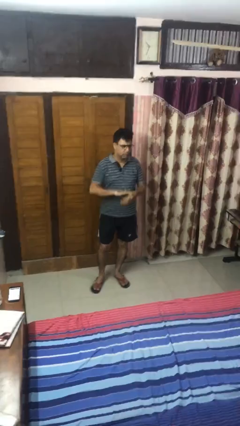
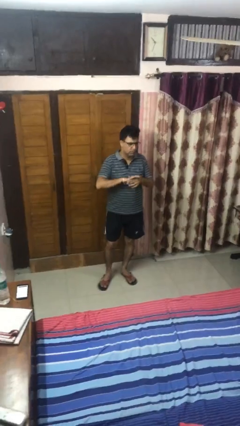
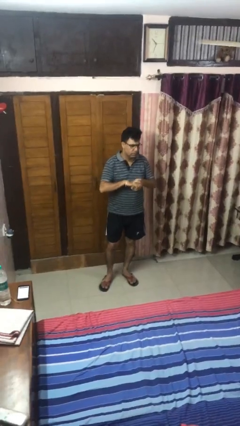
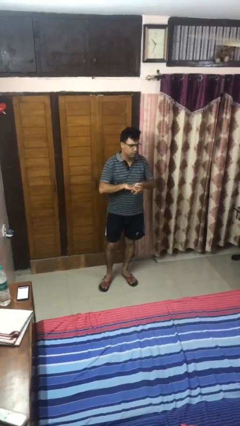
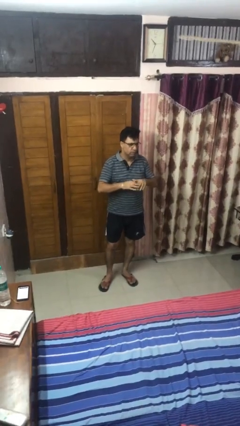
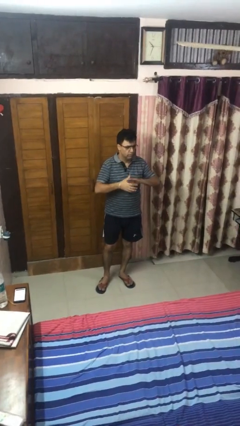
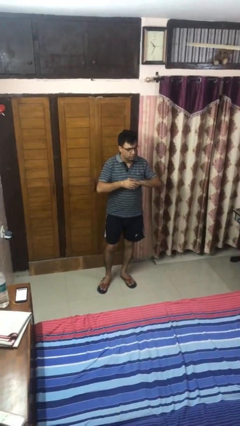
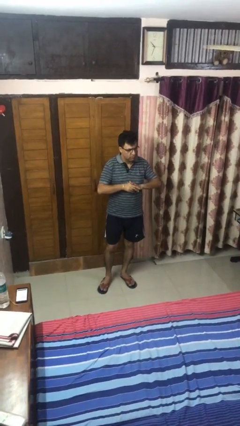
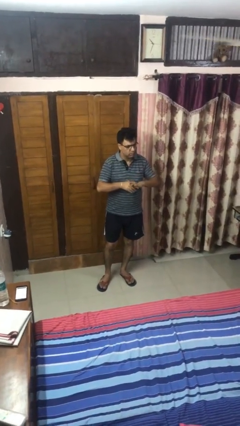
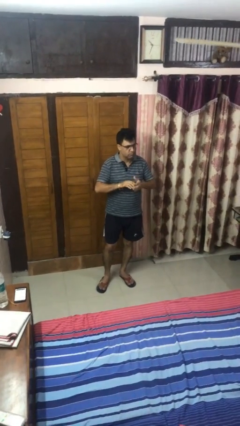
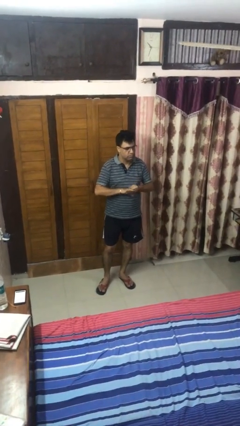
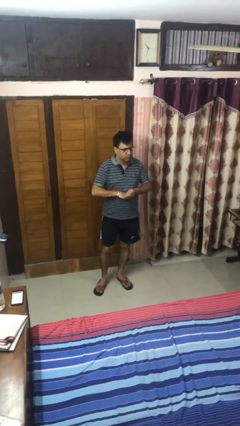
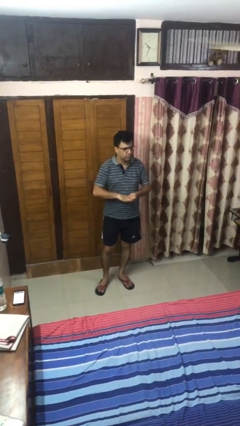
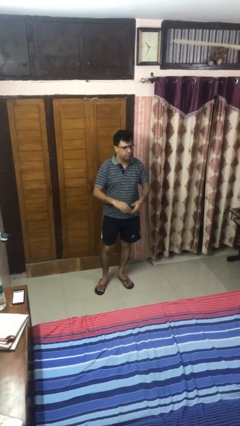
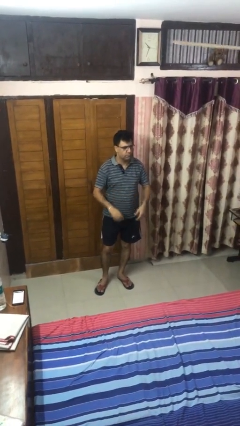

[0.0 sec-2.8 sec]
person cracks knuckles

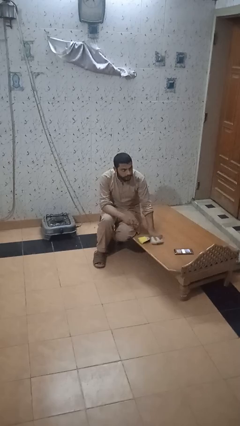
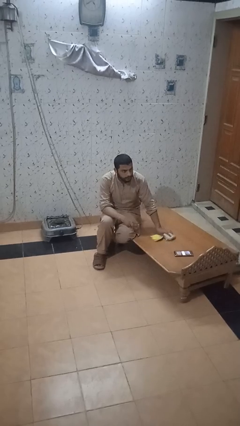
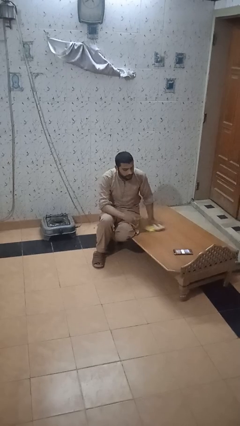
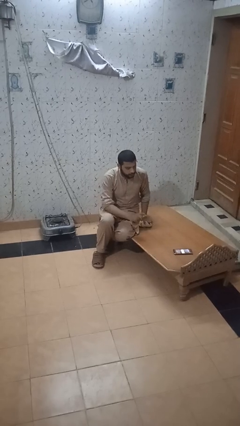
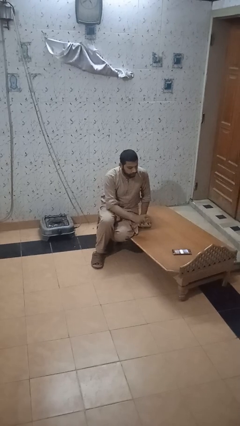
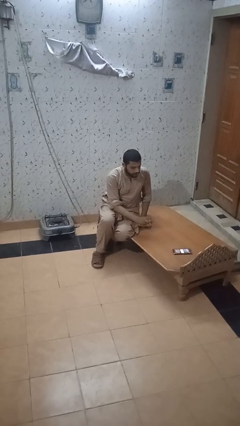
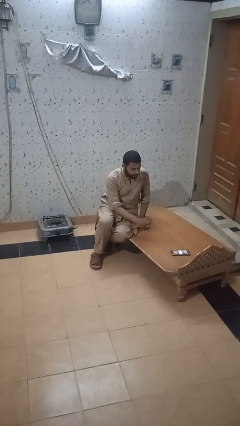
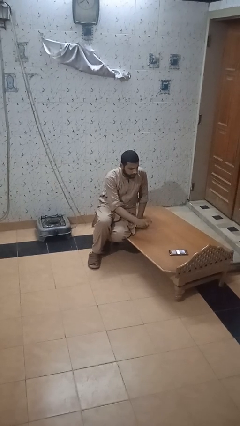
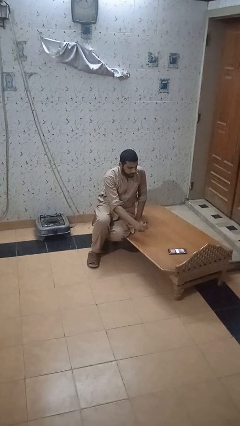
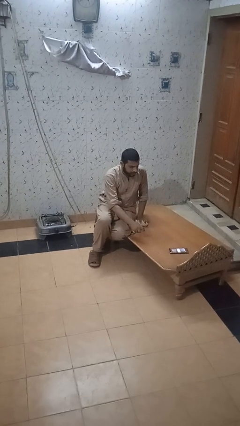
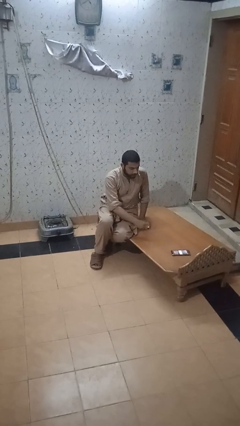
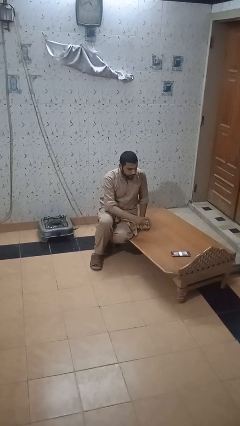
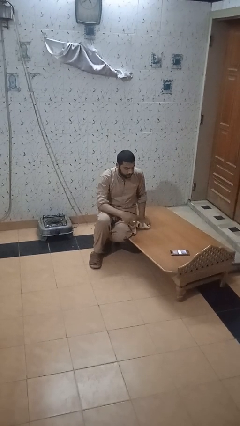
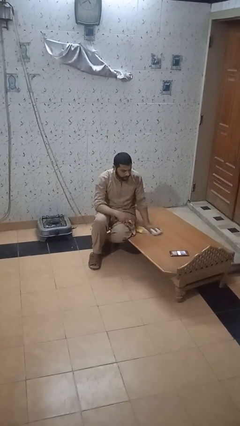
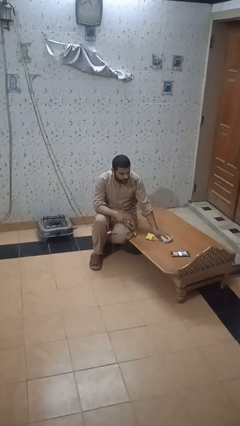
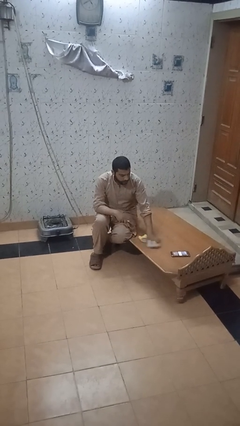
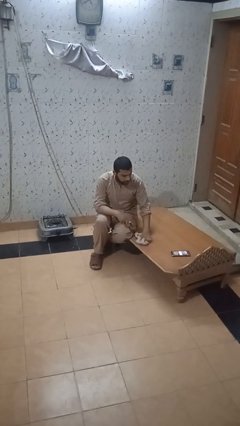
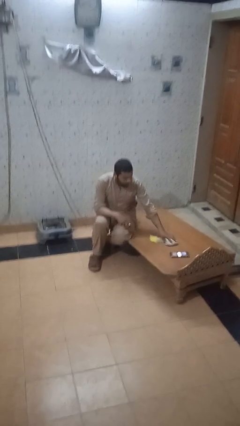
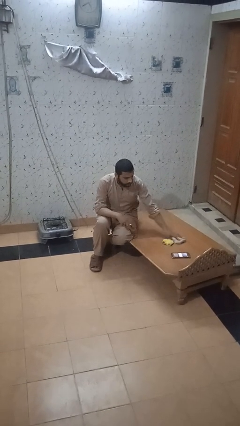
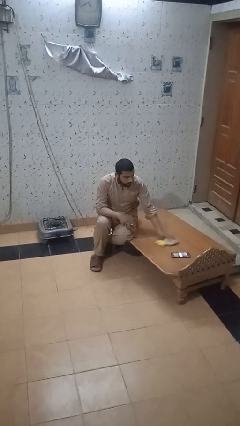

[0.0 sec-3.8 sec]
person sprays from bottle

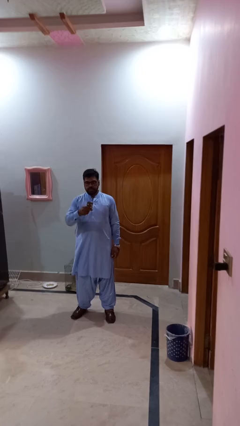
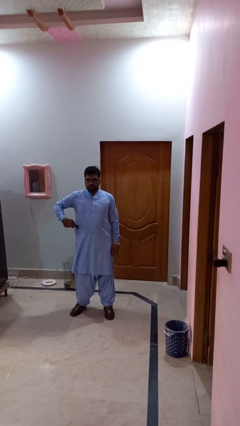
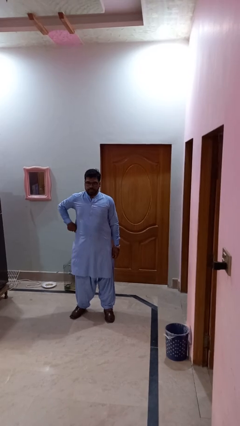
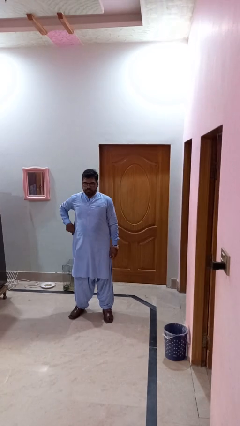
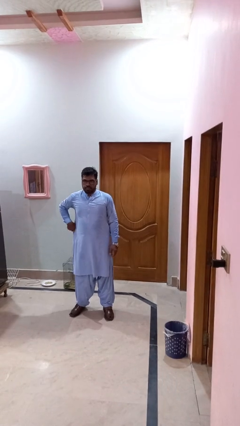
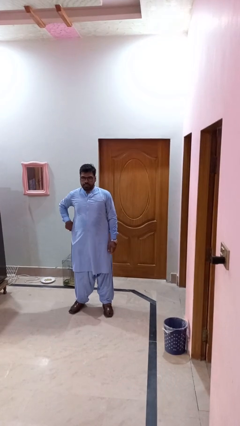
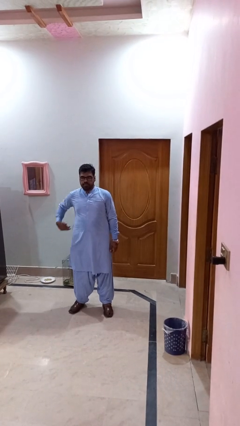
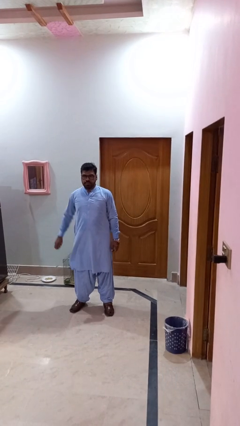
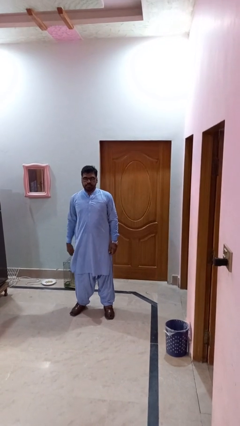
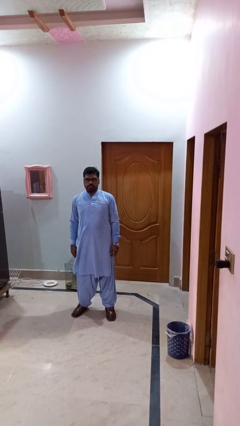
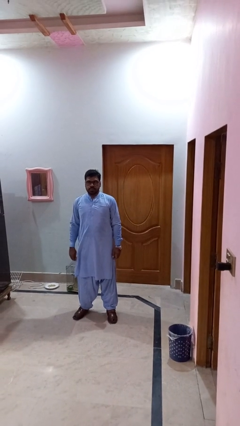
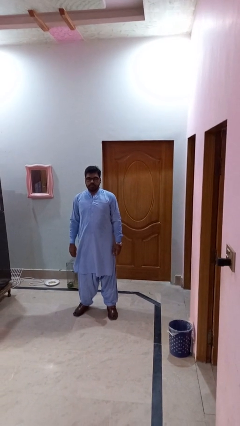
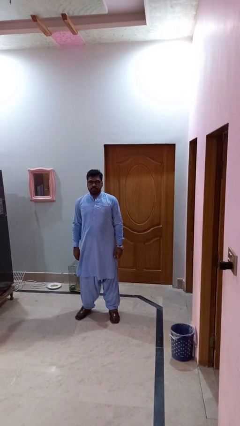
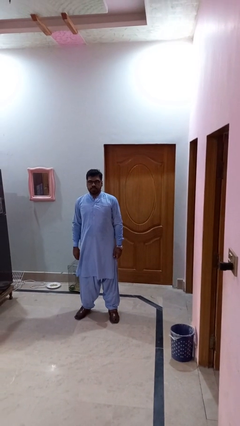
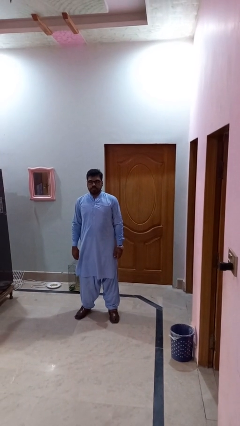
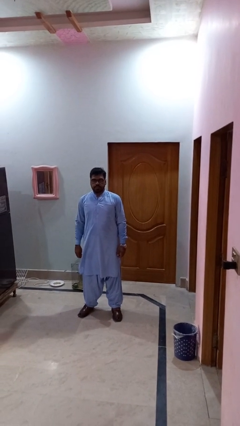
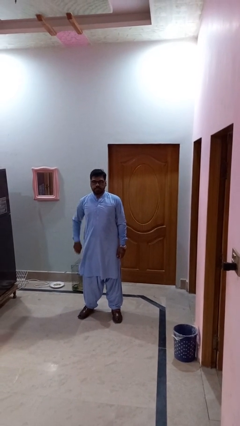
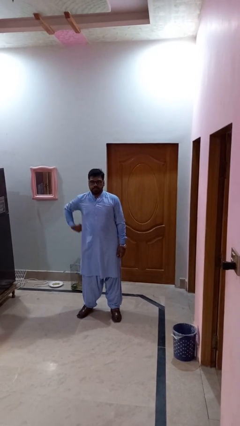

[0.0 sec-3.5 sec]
person puts phone into pocket

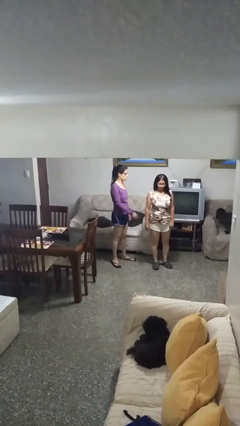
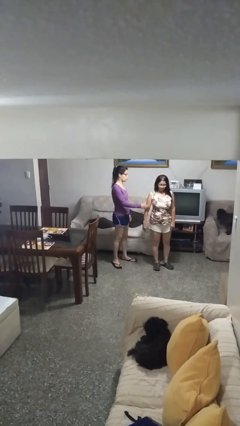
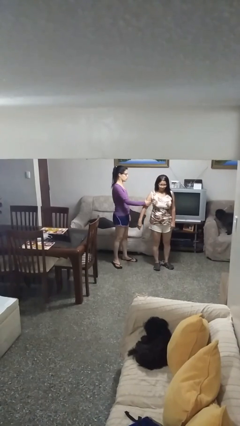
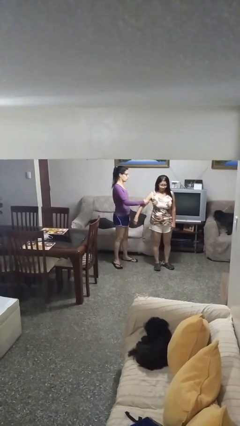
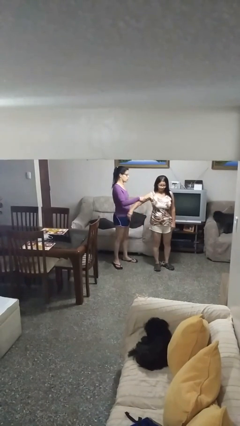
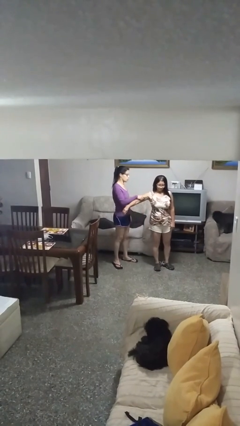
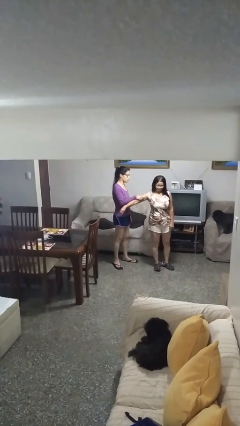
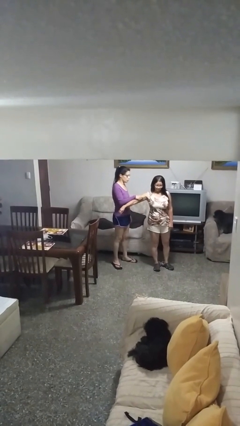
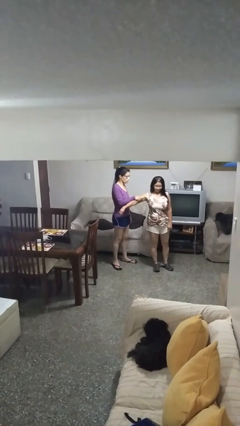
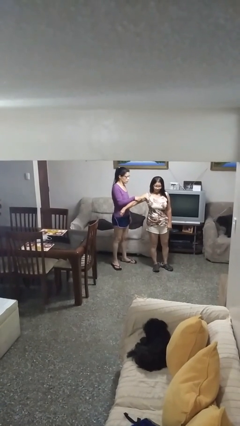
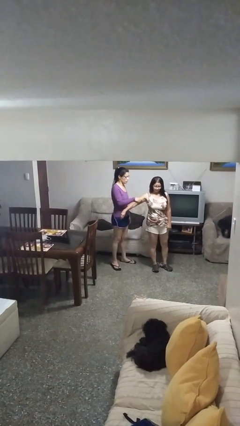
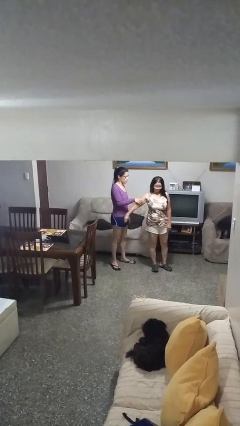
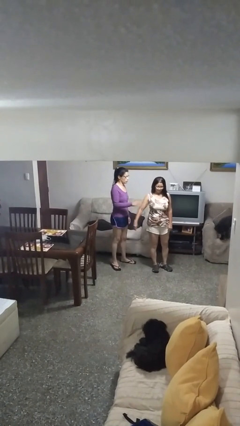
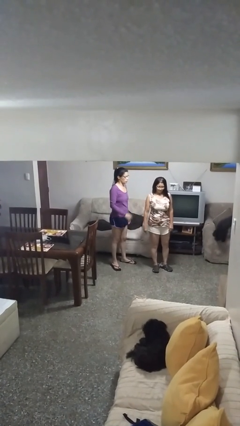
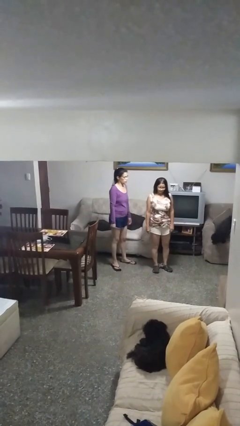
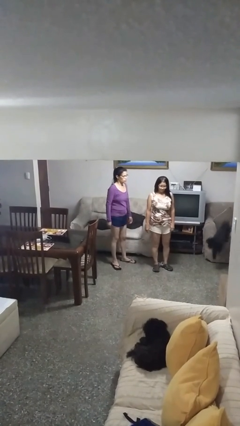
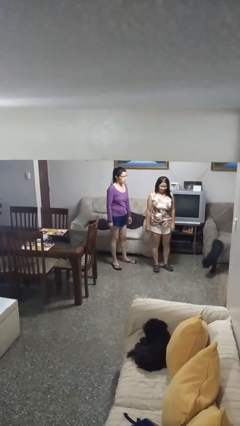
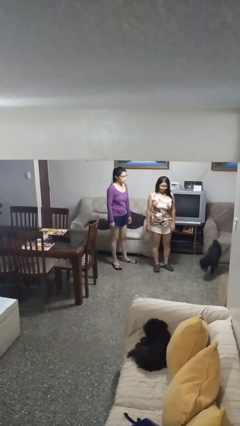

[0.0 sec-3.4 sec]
person grabs person by bicep

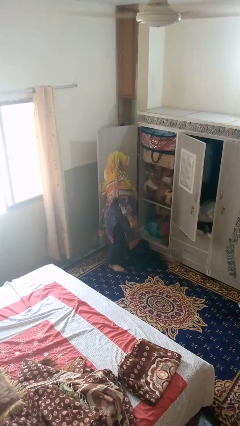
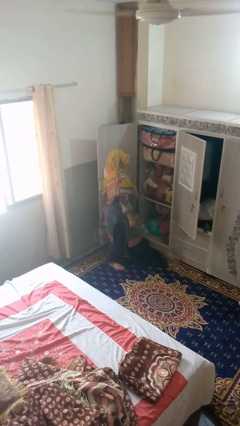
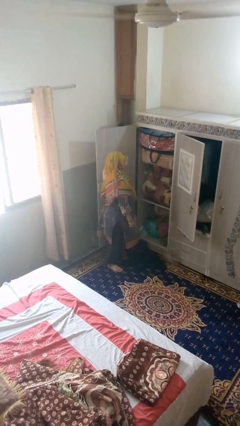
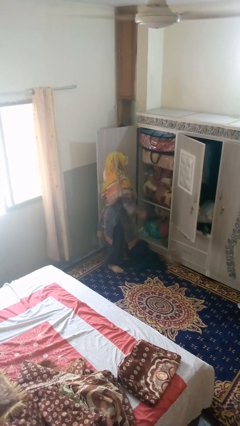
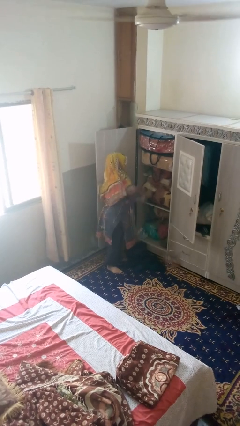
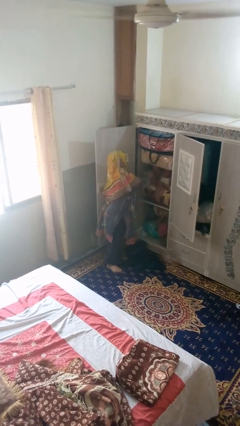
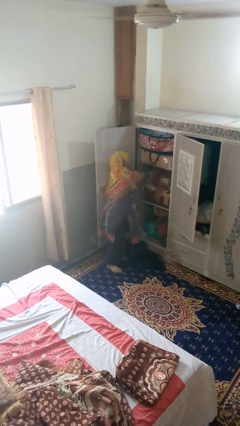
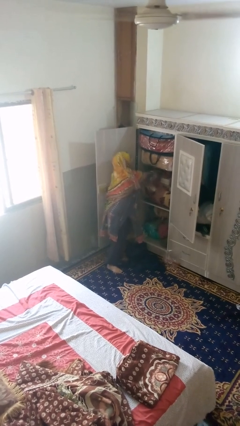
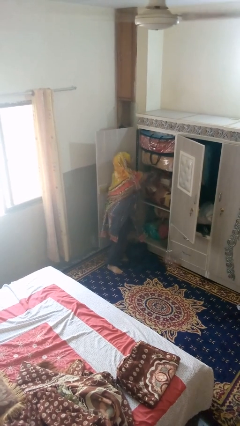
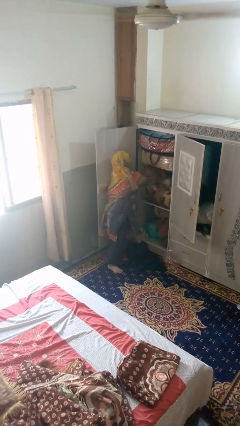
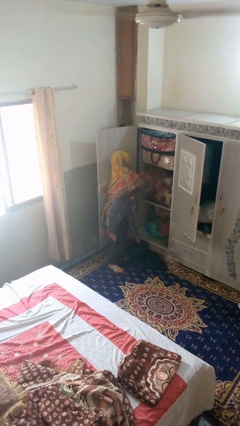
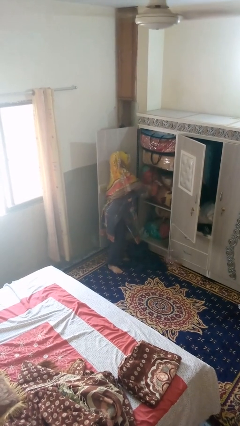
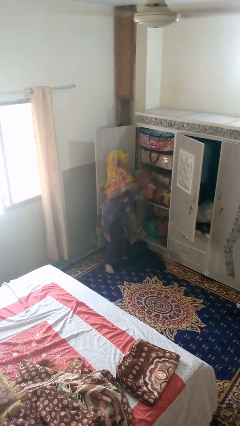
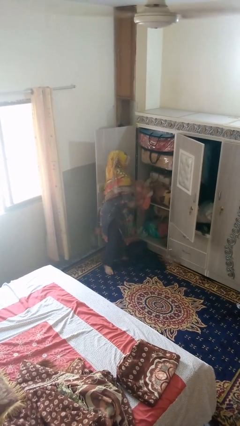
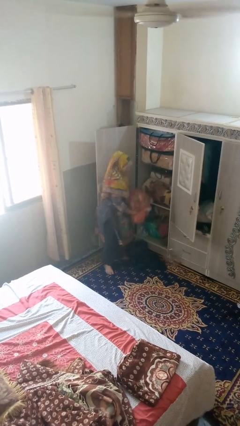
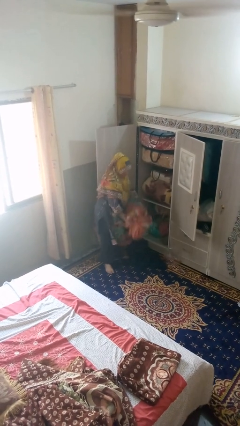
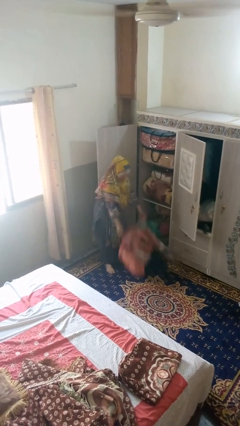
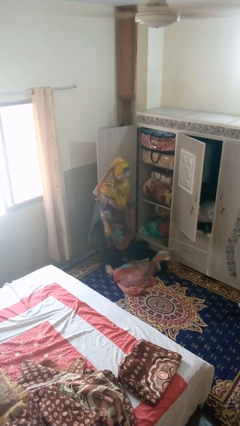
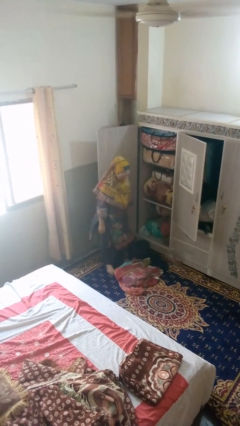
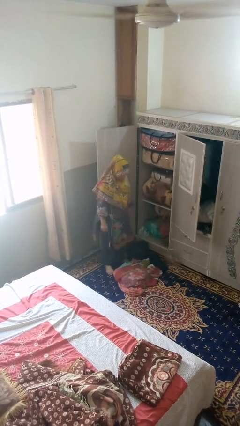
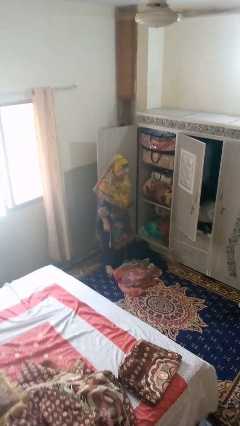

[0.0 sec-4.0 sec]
person puts clothes into dresser
